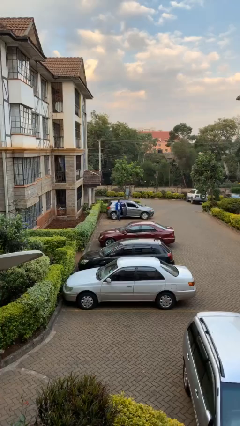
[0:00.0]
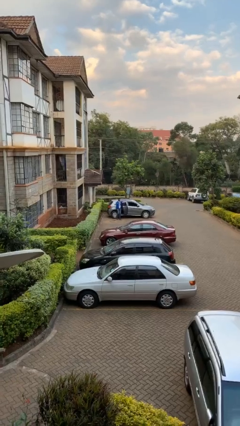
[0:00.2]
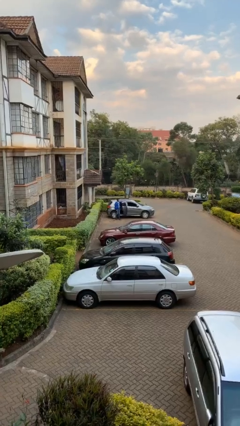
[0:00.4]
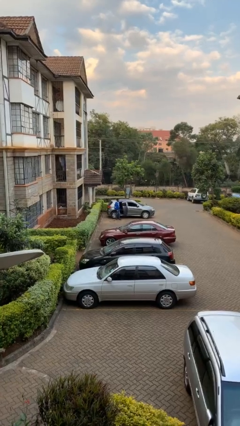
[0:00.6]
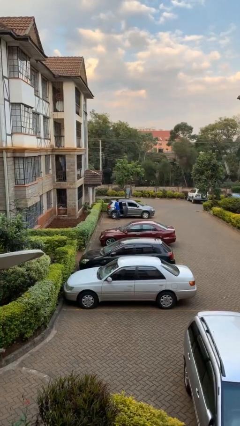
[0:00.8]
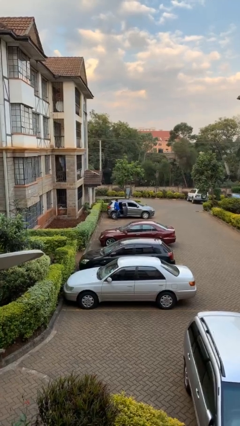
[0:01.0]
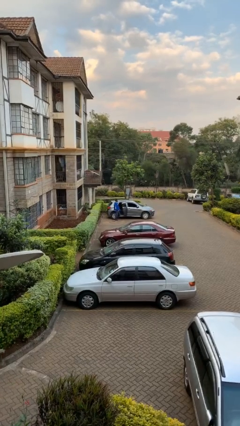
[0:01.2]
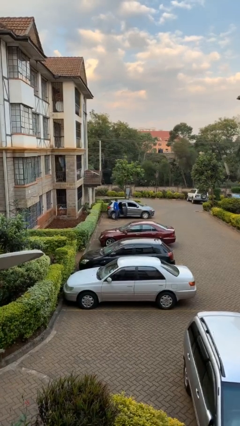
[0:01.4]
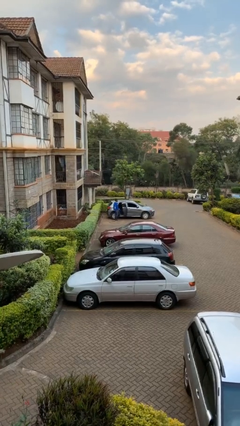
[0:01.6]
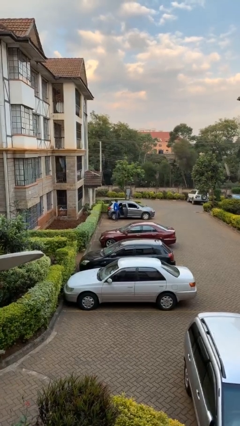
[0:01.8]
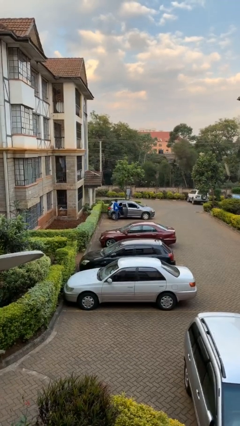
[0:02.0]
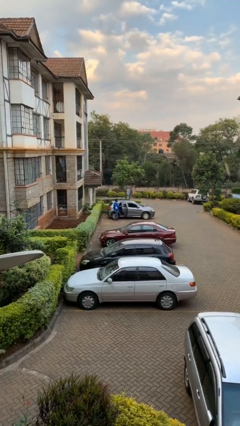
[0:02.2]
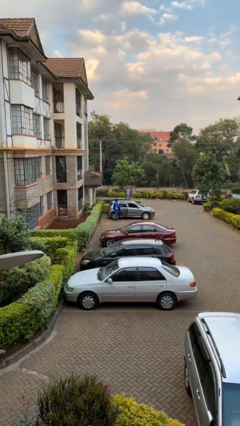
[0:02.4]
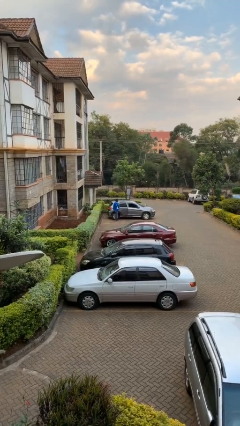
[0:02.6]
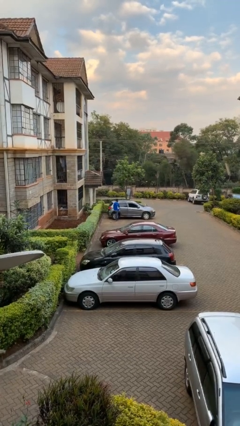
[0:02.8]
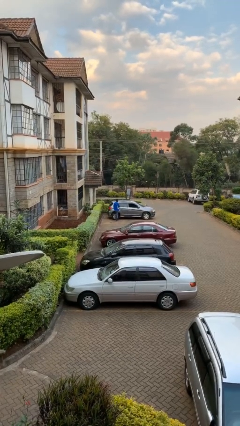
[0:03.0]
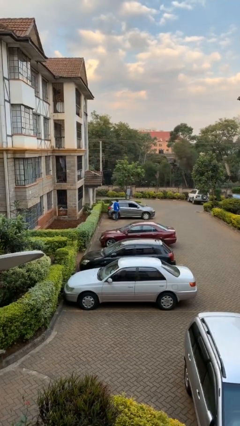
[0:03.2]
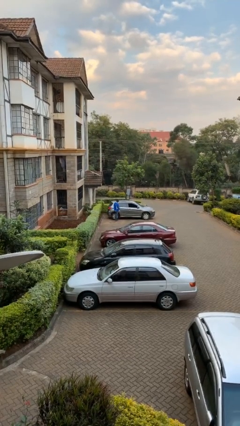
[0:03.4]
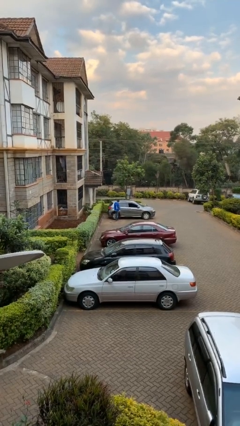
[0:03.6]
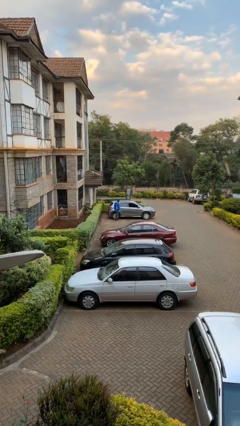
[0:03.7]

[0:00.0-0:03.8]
person closes car door

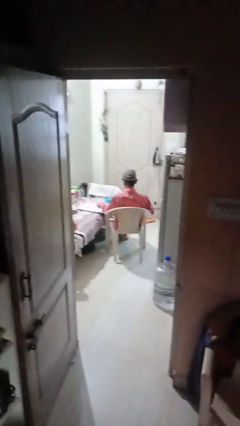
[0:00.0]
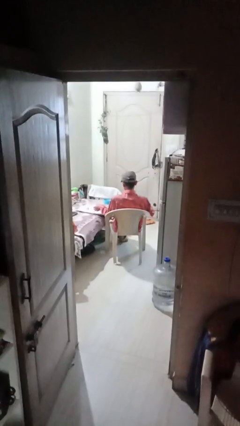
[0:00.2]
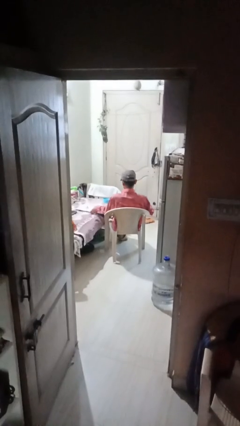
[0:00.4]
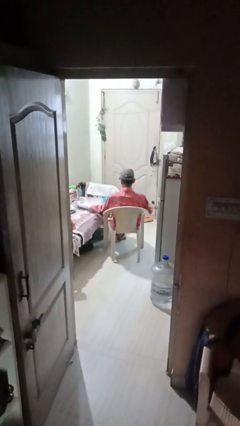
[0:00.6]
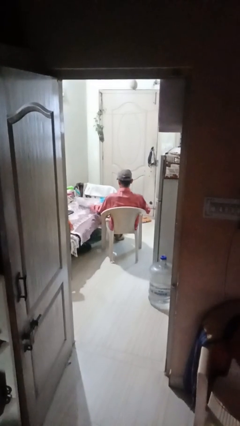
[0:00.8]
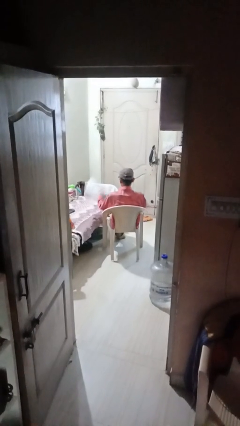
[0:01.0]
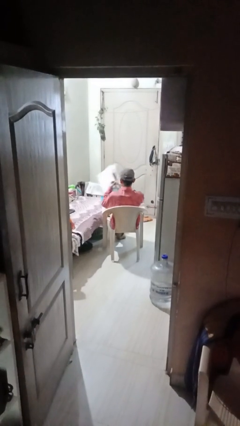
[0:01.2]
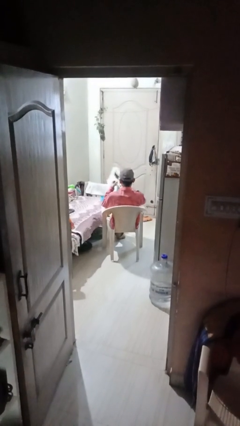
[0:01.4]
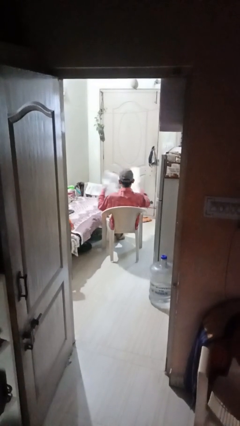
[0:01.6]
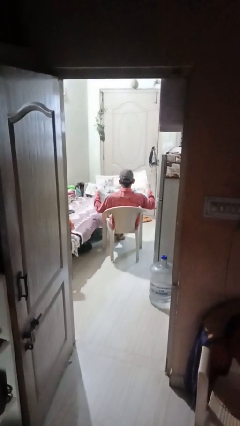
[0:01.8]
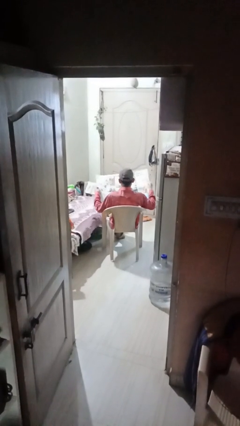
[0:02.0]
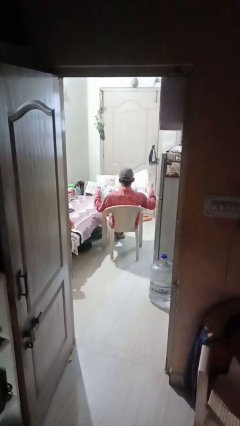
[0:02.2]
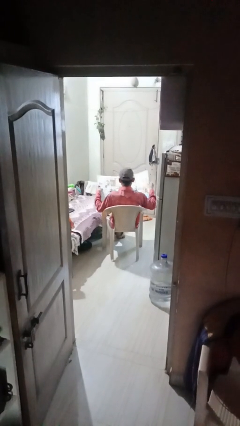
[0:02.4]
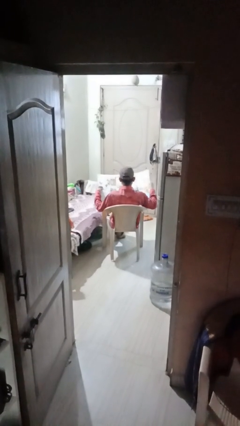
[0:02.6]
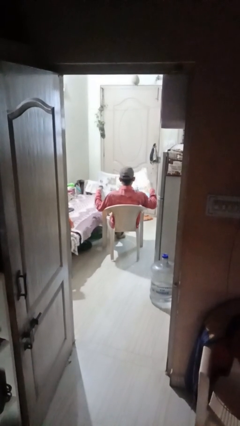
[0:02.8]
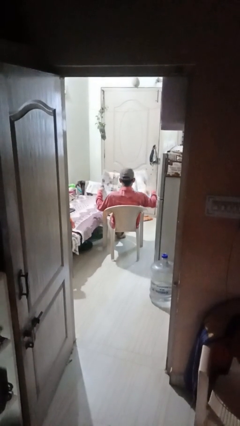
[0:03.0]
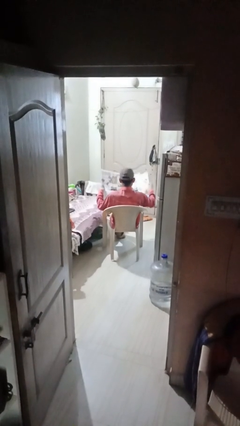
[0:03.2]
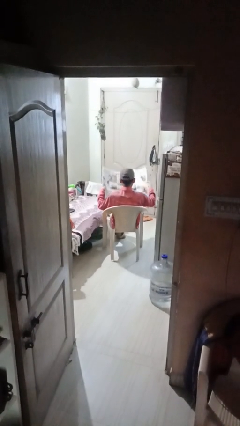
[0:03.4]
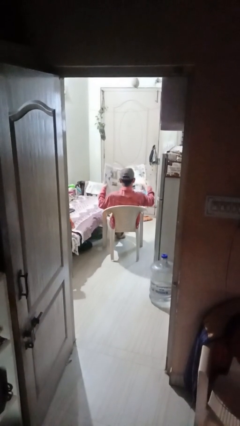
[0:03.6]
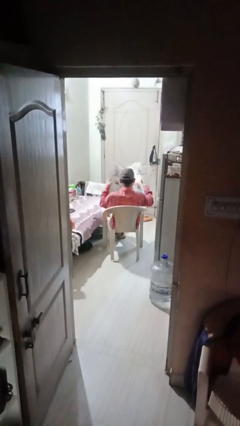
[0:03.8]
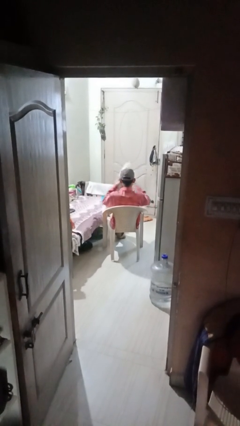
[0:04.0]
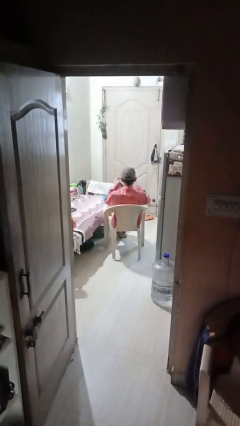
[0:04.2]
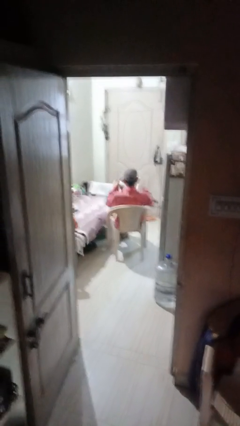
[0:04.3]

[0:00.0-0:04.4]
person reads newspaper

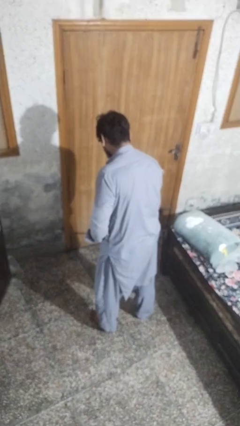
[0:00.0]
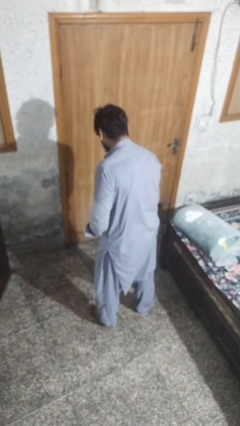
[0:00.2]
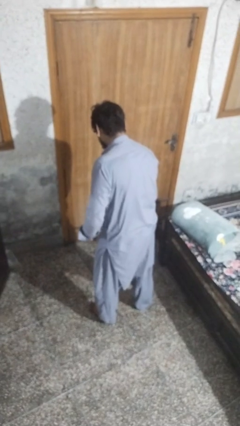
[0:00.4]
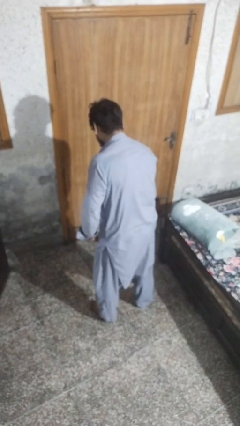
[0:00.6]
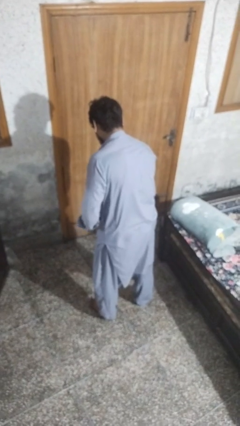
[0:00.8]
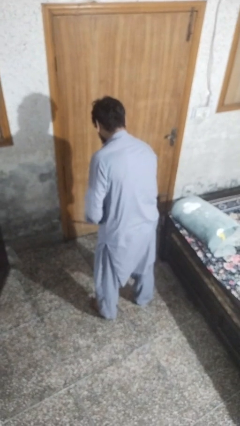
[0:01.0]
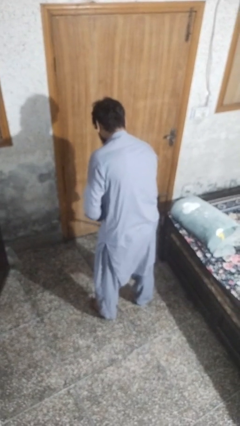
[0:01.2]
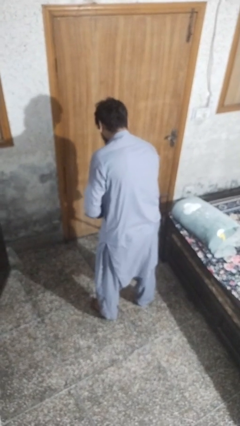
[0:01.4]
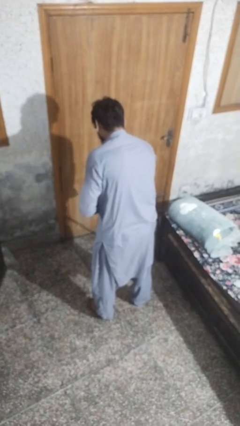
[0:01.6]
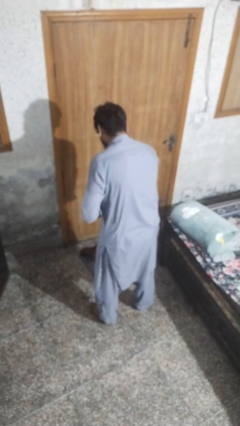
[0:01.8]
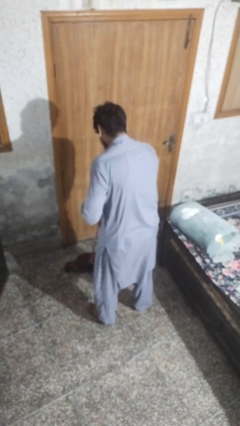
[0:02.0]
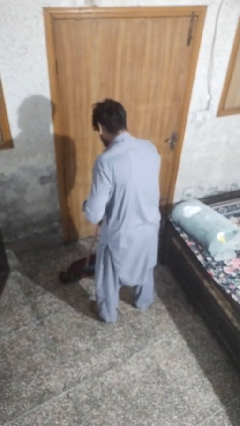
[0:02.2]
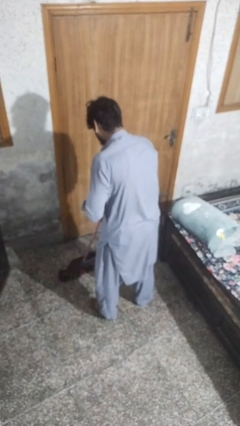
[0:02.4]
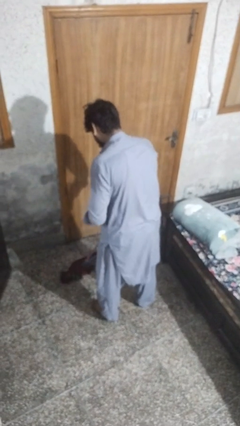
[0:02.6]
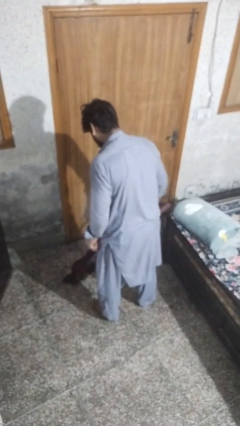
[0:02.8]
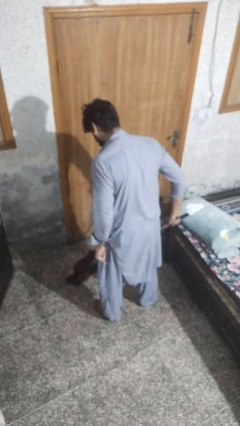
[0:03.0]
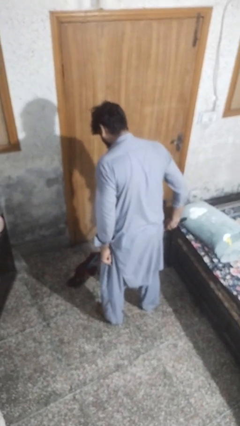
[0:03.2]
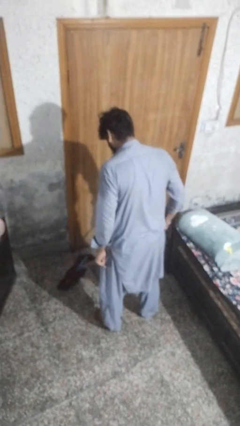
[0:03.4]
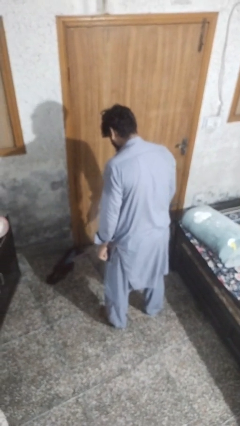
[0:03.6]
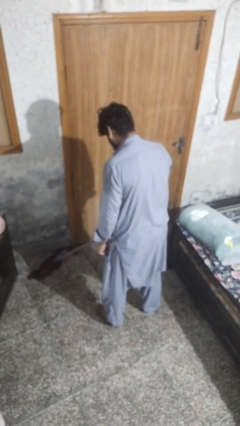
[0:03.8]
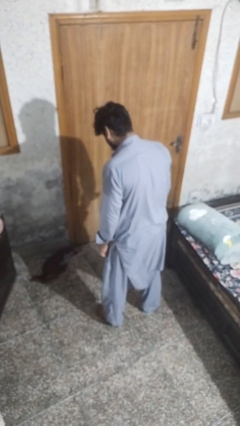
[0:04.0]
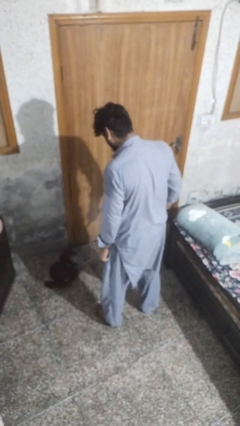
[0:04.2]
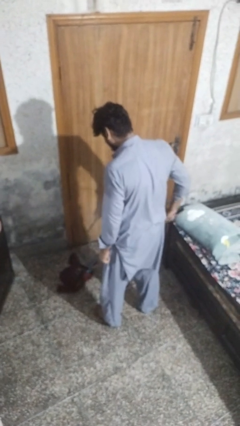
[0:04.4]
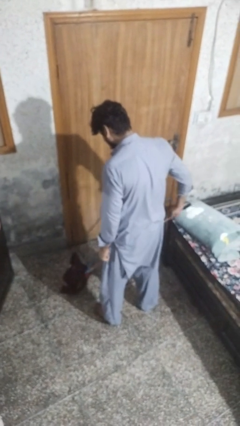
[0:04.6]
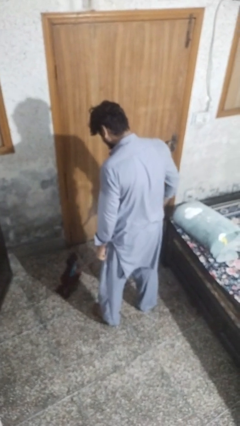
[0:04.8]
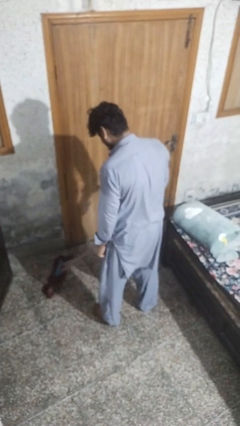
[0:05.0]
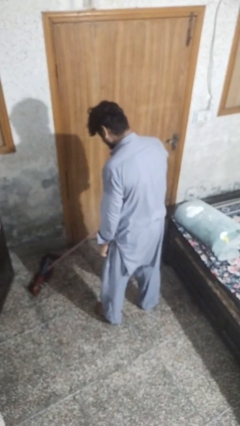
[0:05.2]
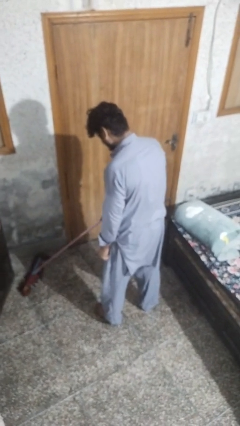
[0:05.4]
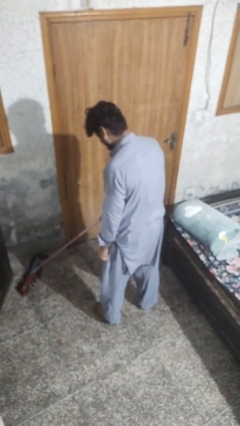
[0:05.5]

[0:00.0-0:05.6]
person mops

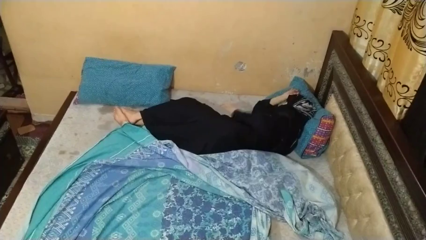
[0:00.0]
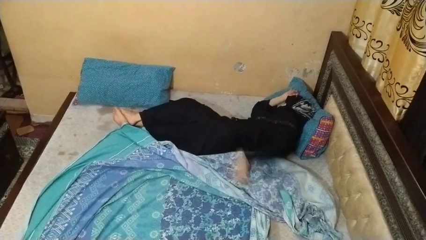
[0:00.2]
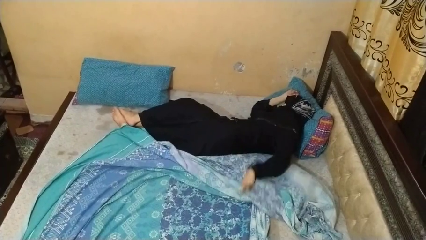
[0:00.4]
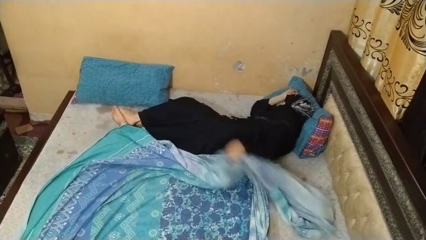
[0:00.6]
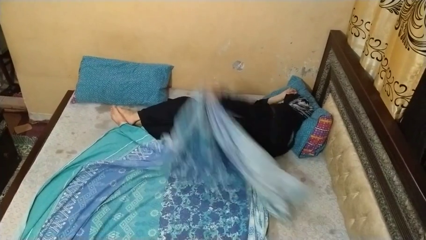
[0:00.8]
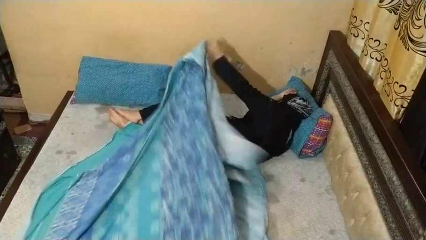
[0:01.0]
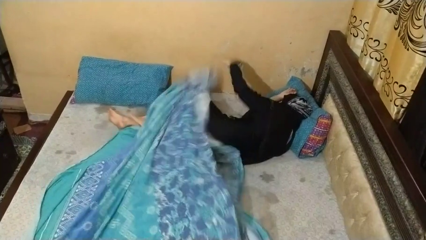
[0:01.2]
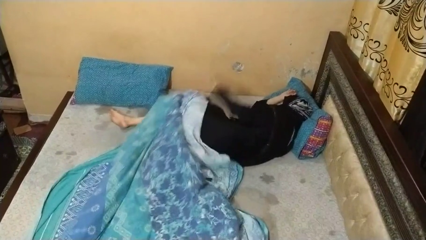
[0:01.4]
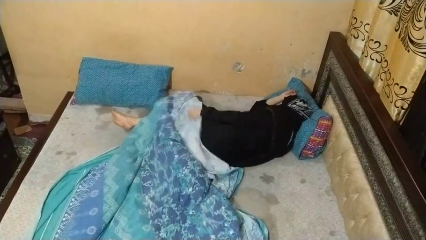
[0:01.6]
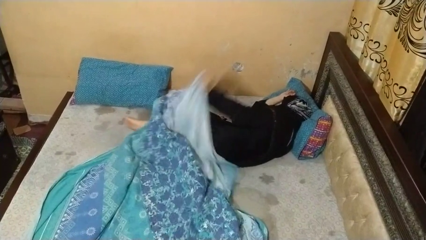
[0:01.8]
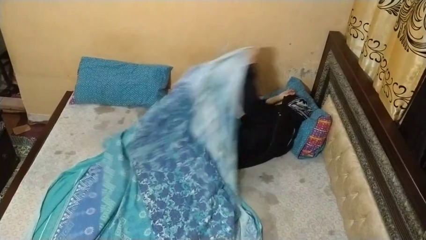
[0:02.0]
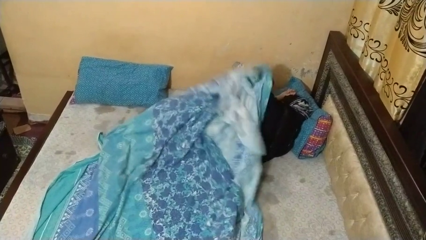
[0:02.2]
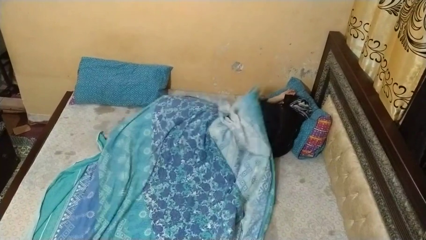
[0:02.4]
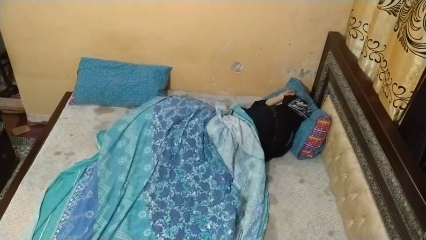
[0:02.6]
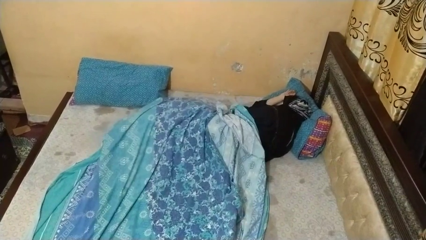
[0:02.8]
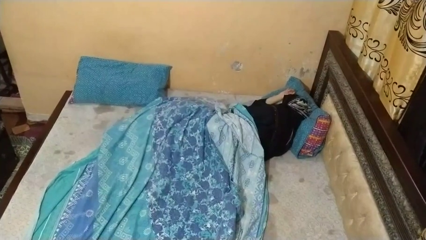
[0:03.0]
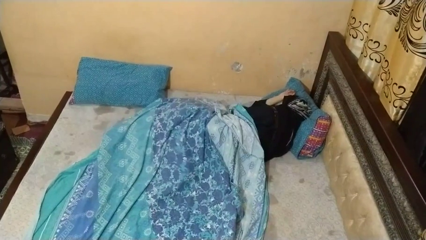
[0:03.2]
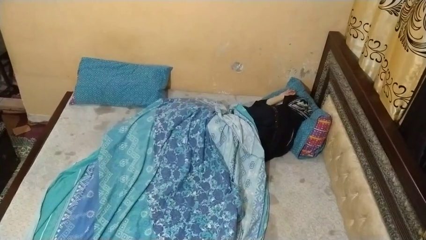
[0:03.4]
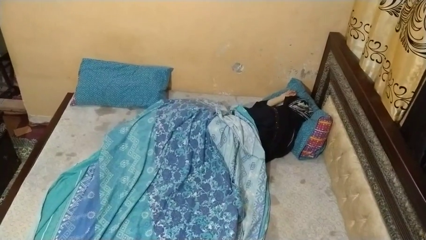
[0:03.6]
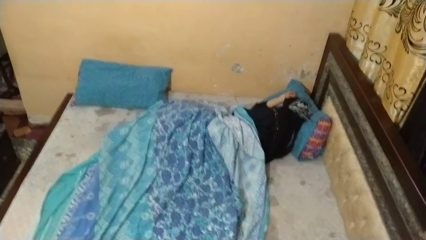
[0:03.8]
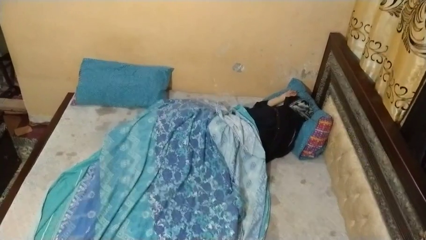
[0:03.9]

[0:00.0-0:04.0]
person covers with bedsheets

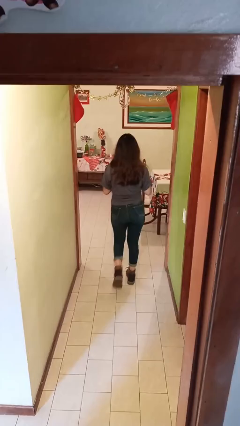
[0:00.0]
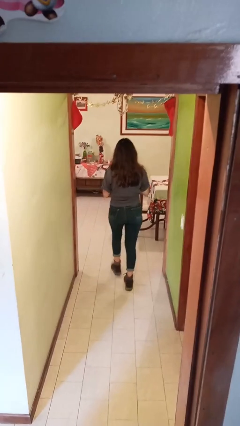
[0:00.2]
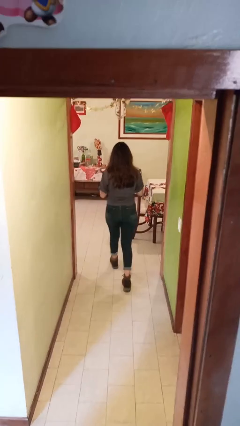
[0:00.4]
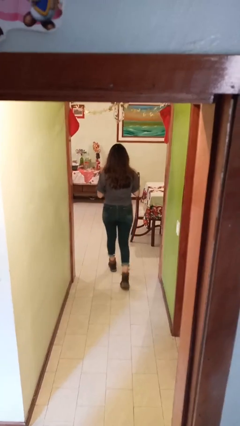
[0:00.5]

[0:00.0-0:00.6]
person exits scene through structure
